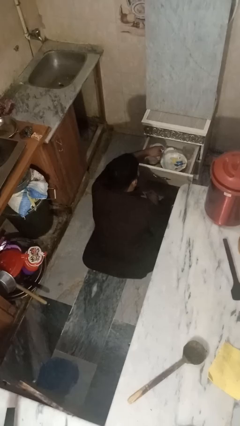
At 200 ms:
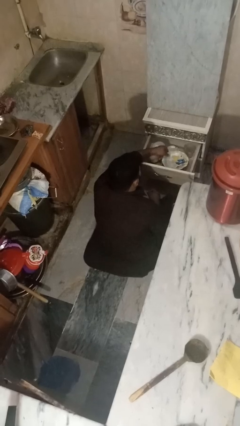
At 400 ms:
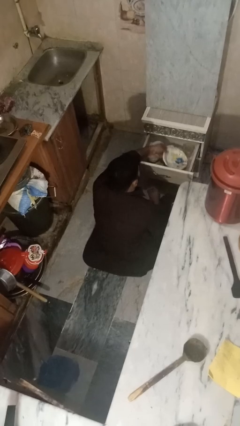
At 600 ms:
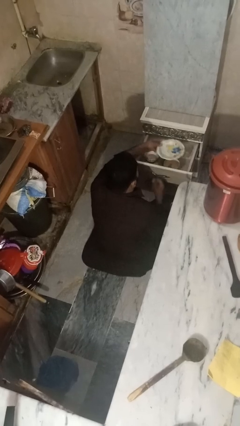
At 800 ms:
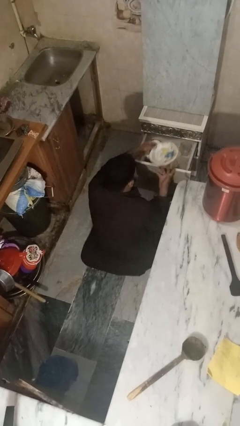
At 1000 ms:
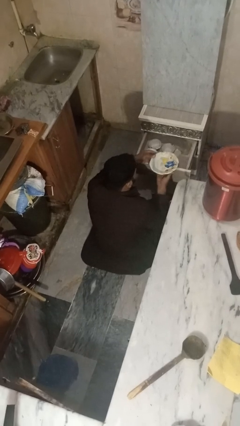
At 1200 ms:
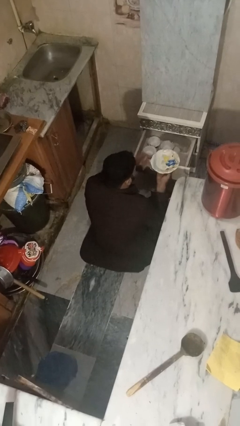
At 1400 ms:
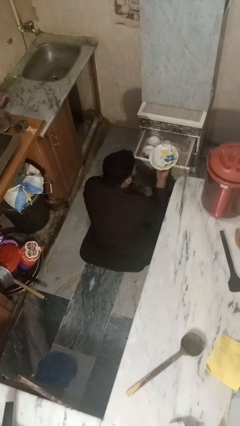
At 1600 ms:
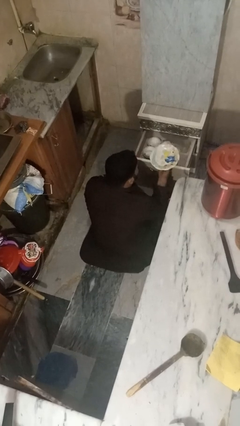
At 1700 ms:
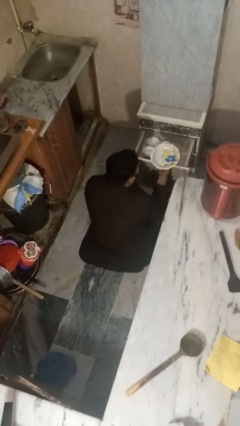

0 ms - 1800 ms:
person takes object from kitchen drawer

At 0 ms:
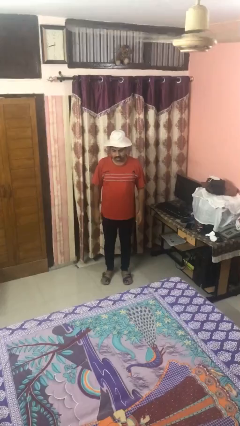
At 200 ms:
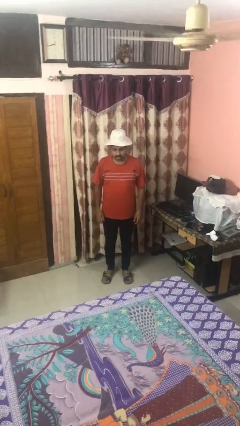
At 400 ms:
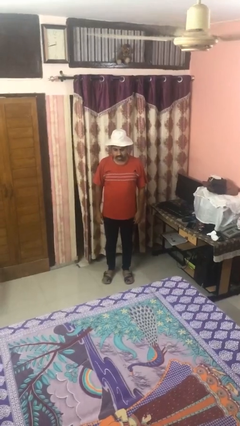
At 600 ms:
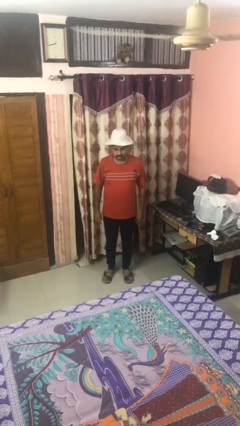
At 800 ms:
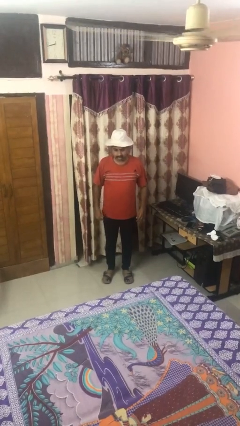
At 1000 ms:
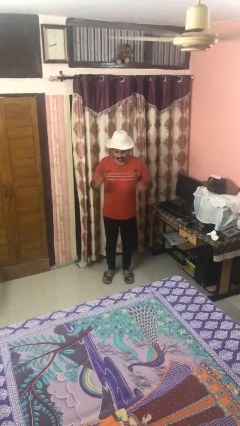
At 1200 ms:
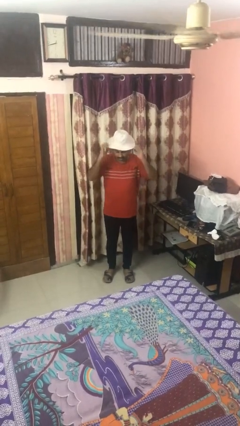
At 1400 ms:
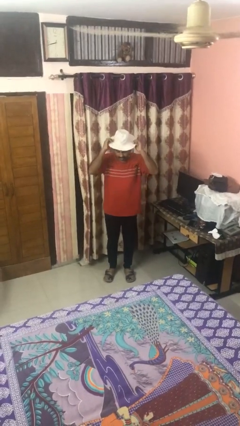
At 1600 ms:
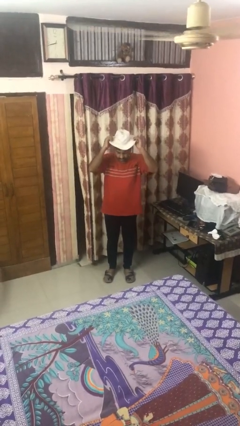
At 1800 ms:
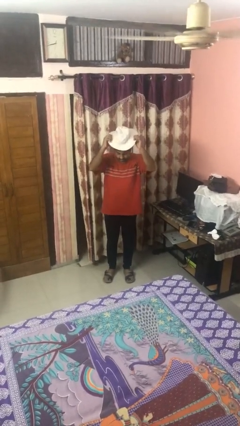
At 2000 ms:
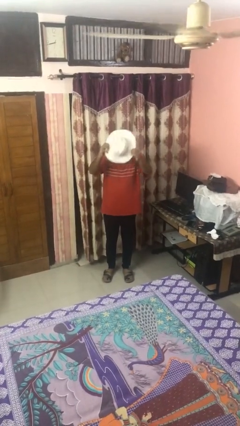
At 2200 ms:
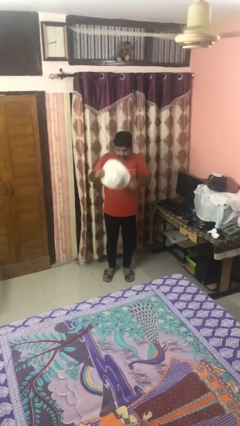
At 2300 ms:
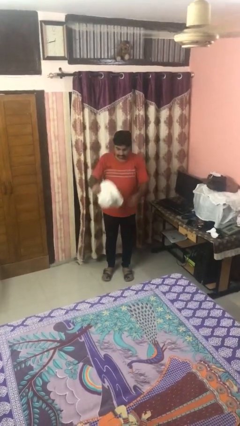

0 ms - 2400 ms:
person takes off hat

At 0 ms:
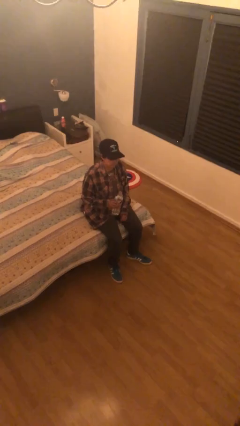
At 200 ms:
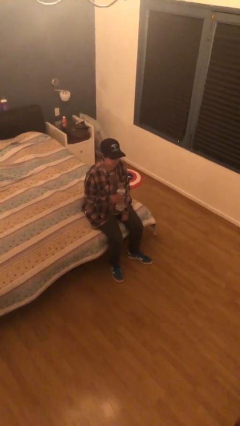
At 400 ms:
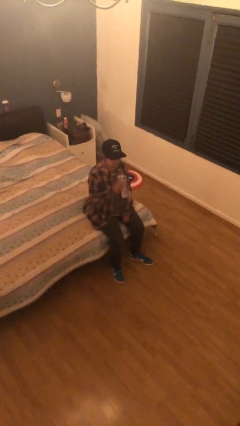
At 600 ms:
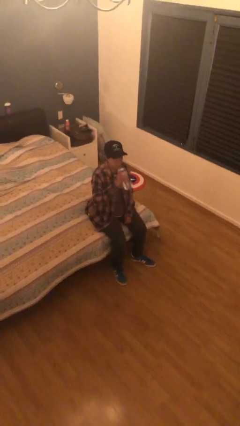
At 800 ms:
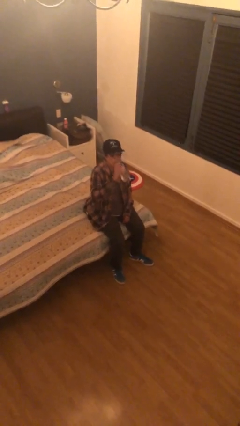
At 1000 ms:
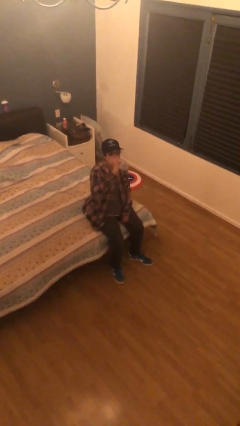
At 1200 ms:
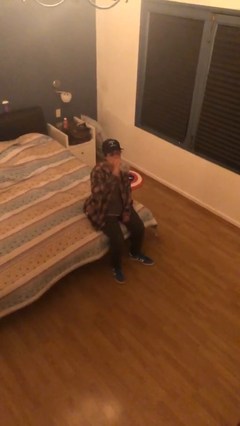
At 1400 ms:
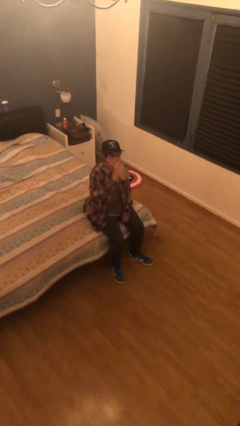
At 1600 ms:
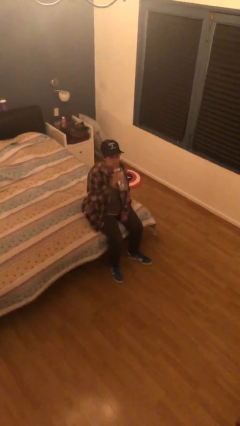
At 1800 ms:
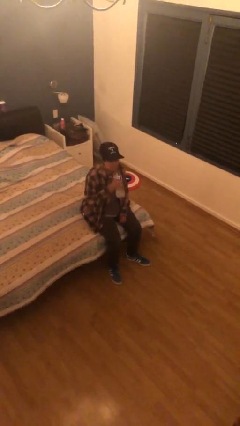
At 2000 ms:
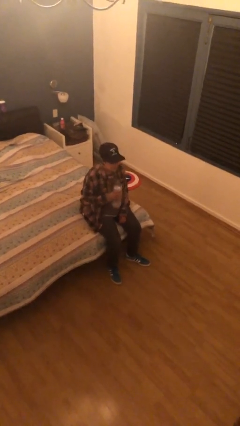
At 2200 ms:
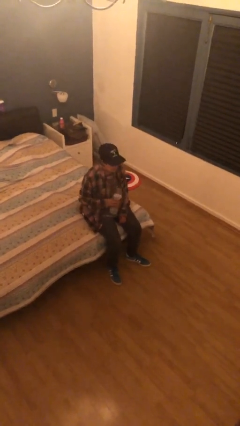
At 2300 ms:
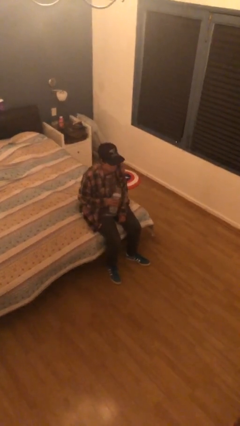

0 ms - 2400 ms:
person drinks from bottle

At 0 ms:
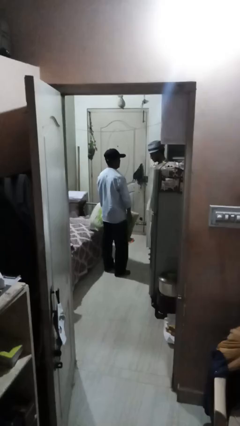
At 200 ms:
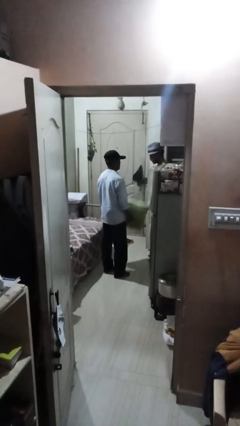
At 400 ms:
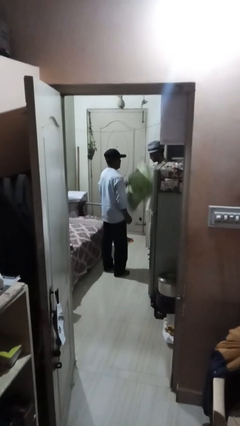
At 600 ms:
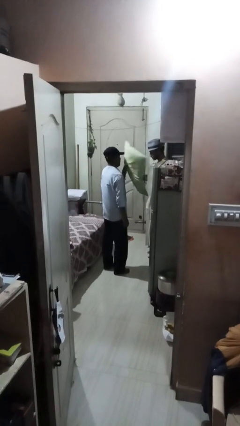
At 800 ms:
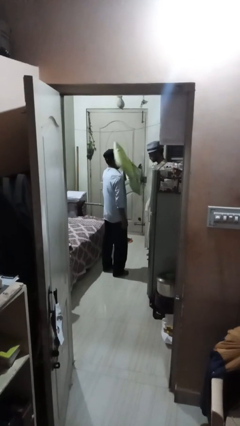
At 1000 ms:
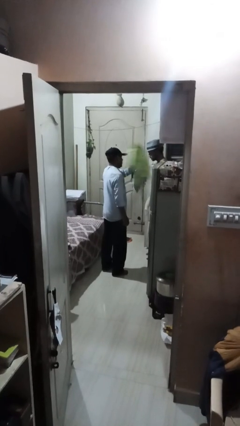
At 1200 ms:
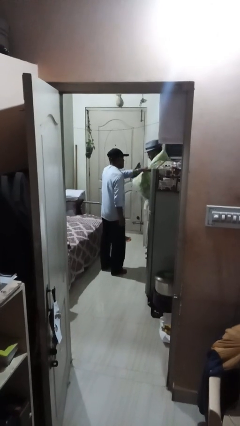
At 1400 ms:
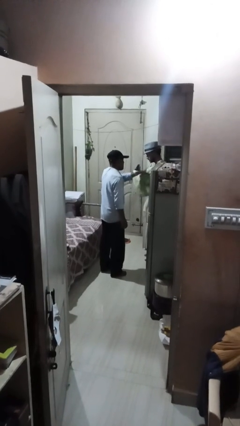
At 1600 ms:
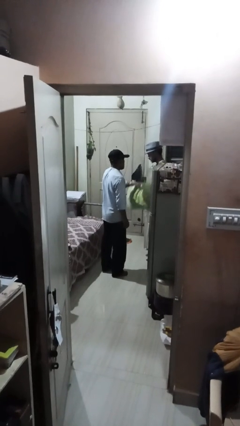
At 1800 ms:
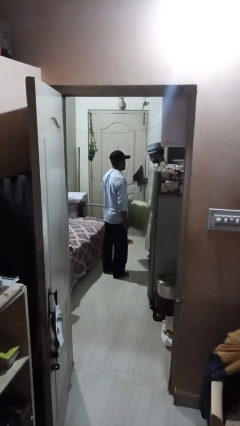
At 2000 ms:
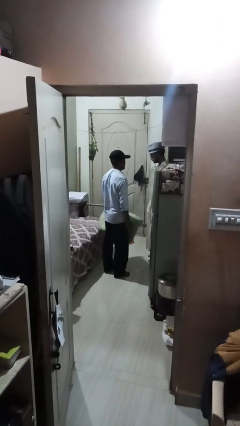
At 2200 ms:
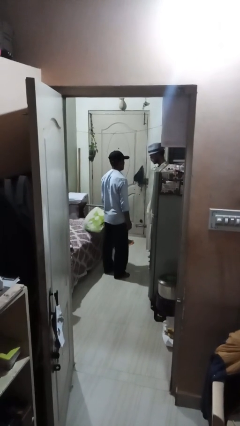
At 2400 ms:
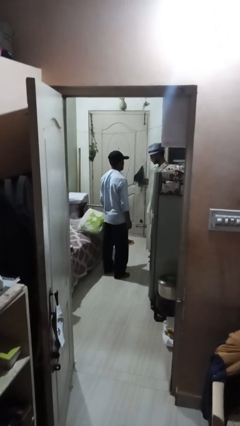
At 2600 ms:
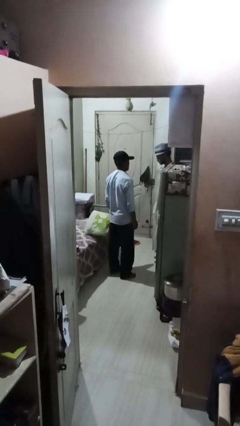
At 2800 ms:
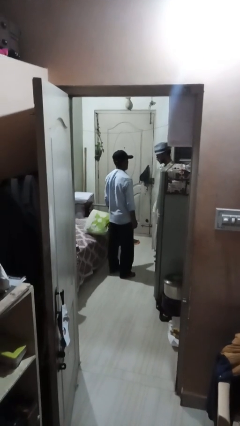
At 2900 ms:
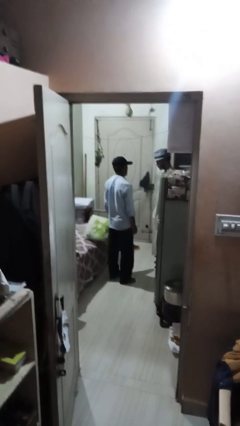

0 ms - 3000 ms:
person hits person with pillow

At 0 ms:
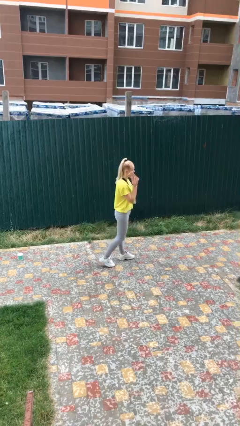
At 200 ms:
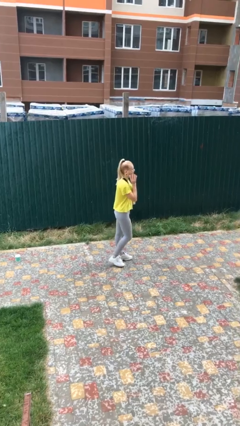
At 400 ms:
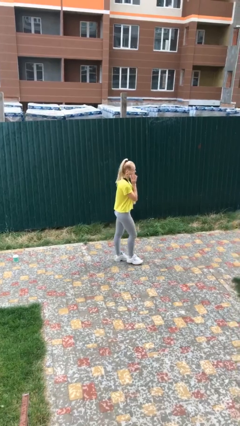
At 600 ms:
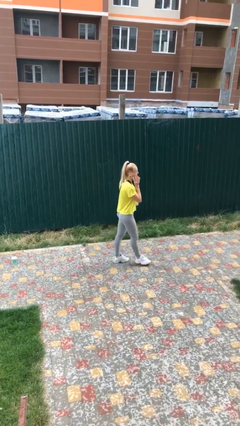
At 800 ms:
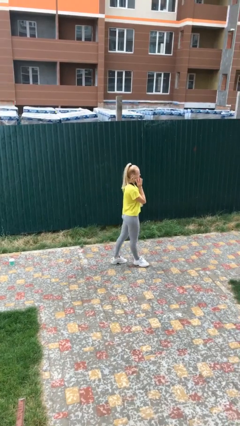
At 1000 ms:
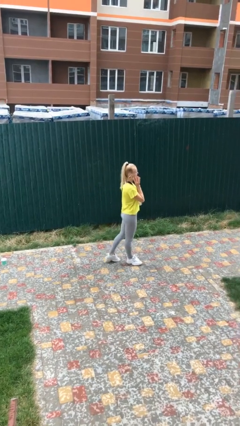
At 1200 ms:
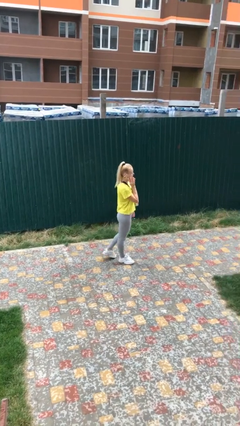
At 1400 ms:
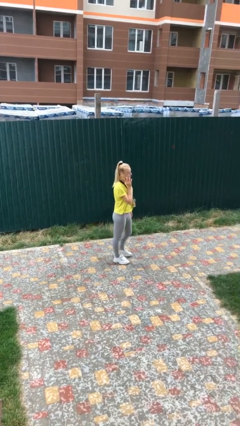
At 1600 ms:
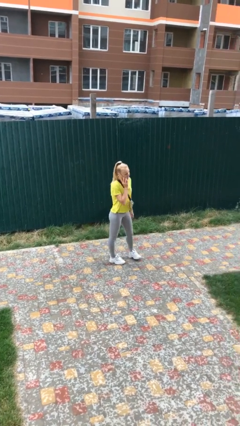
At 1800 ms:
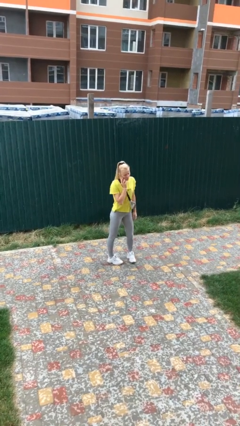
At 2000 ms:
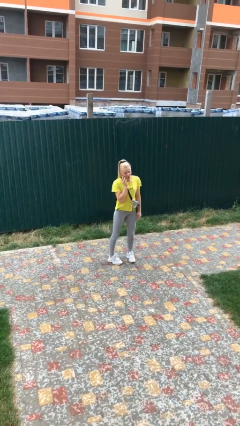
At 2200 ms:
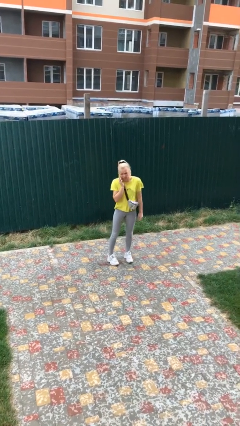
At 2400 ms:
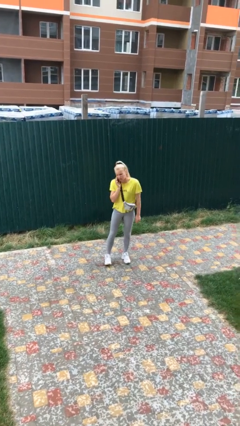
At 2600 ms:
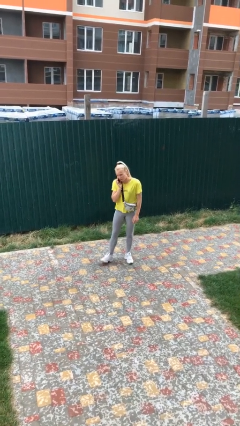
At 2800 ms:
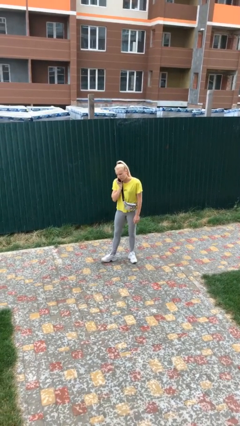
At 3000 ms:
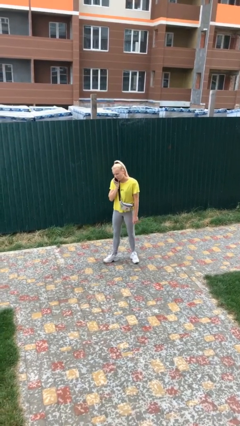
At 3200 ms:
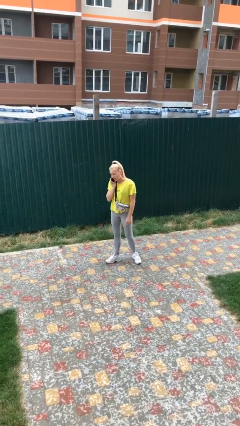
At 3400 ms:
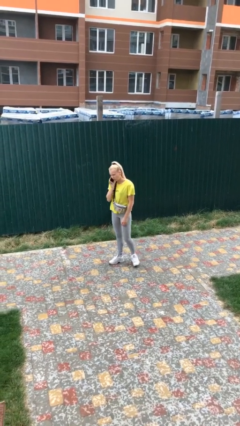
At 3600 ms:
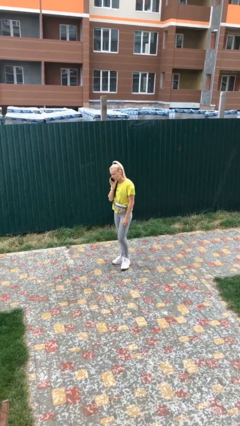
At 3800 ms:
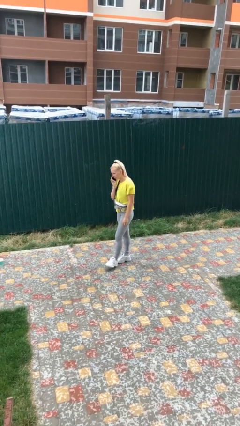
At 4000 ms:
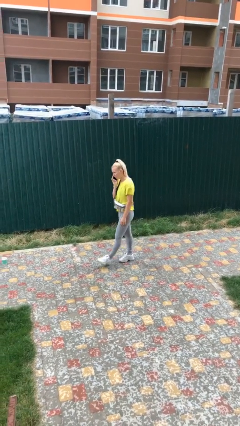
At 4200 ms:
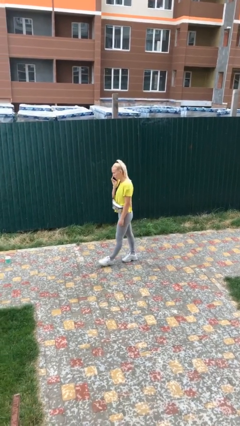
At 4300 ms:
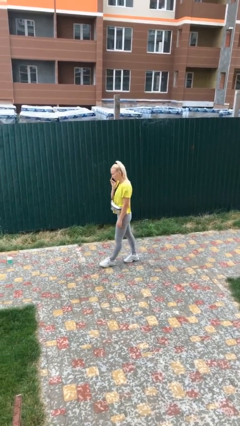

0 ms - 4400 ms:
person talks on phone

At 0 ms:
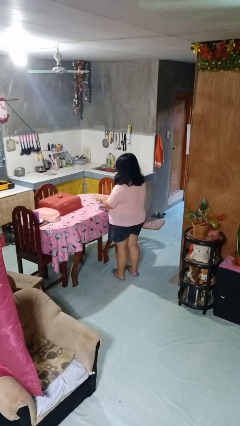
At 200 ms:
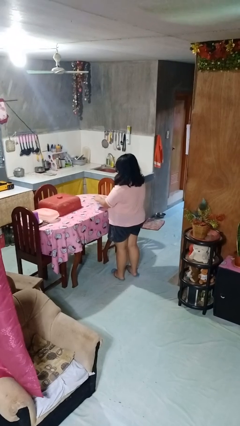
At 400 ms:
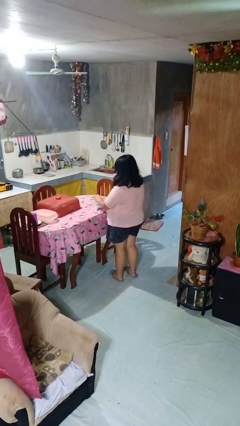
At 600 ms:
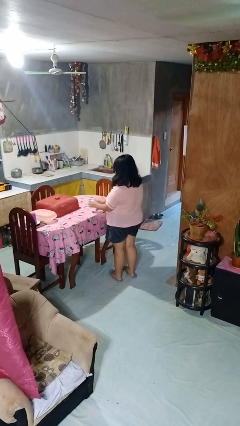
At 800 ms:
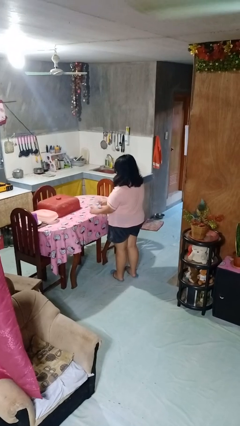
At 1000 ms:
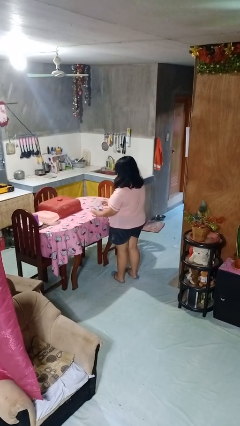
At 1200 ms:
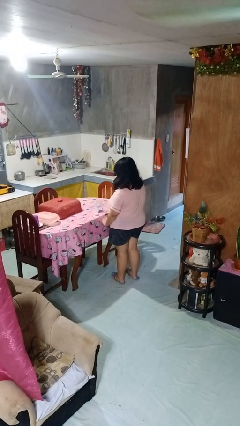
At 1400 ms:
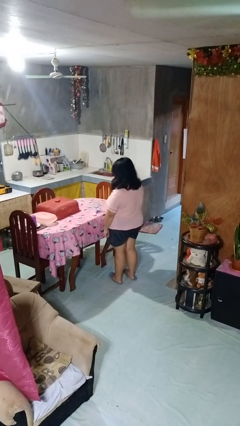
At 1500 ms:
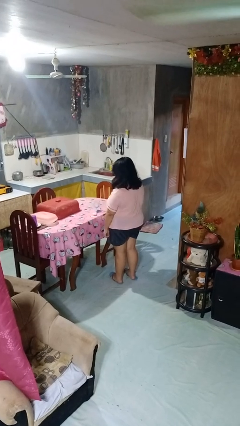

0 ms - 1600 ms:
person opens jar

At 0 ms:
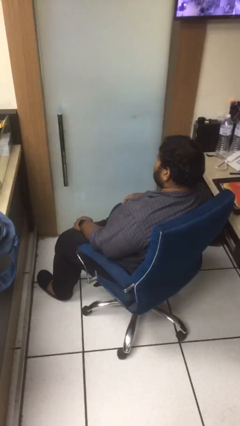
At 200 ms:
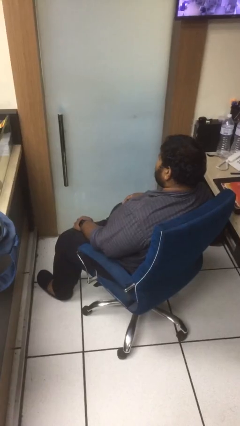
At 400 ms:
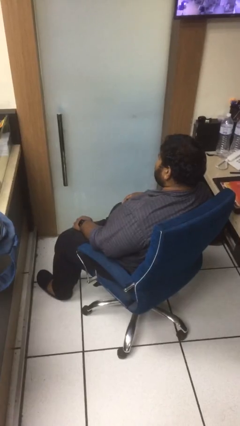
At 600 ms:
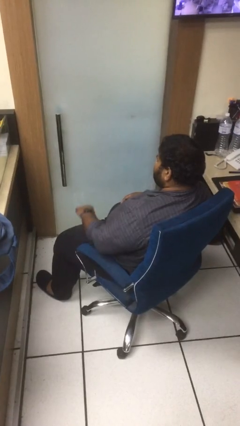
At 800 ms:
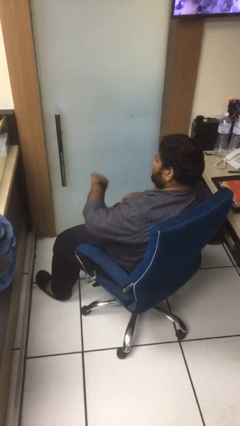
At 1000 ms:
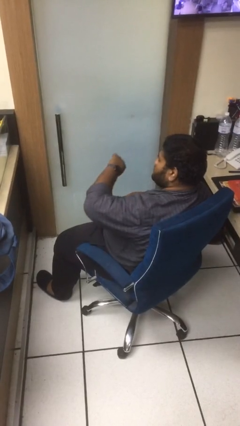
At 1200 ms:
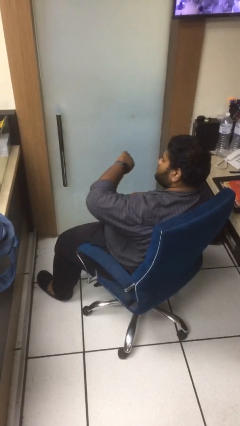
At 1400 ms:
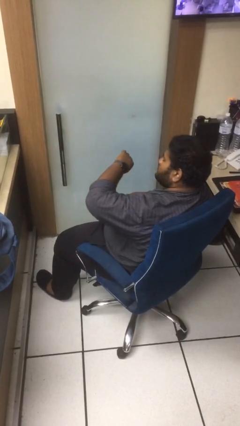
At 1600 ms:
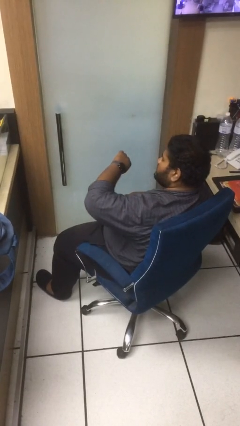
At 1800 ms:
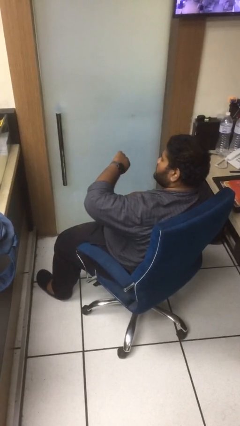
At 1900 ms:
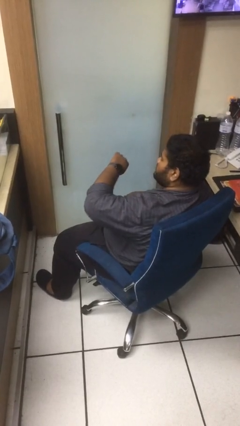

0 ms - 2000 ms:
person looks at wristwatch
